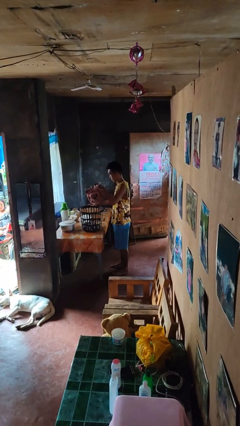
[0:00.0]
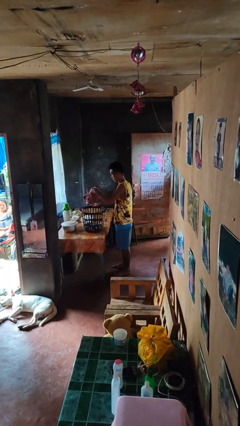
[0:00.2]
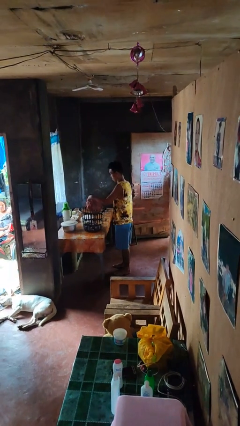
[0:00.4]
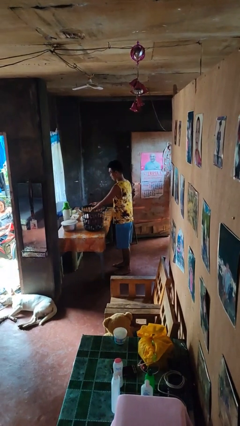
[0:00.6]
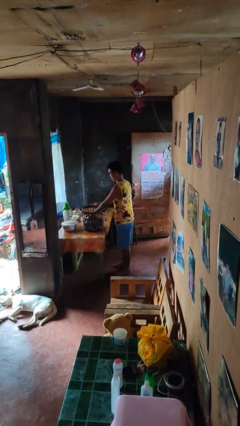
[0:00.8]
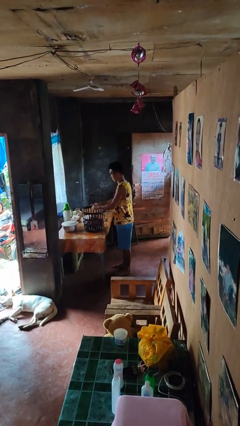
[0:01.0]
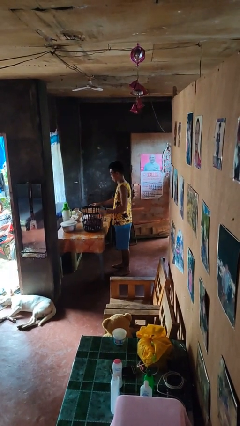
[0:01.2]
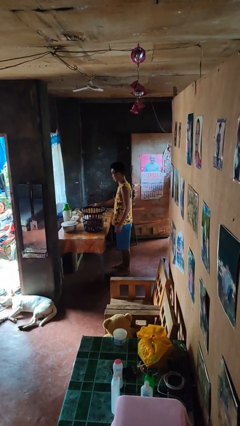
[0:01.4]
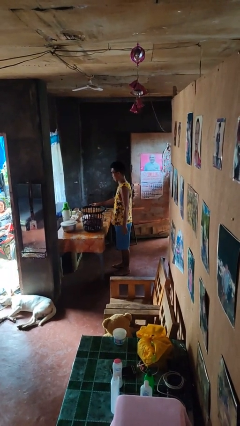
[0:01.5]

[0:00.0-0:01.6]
person puts object into basket

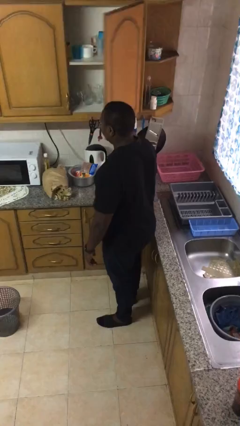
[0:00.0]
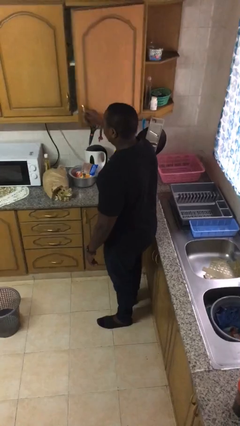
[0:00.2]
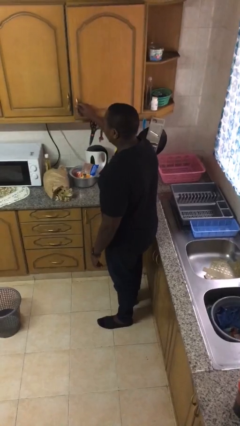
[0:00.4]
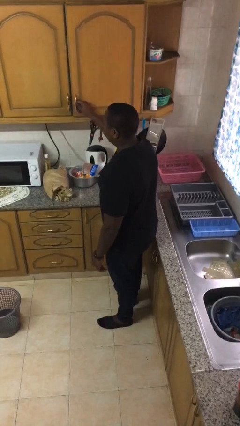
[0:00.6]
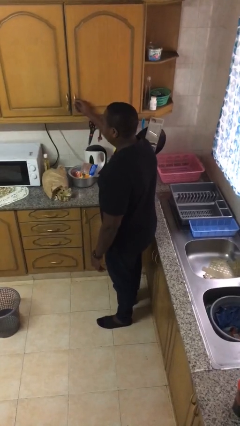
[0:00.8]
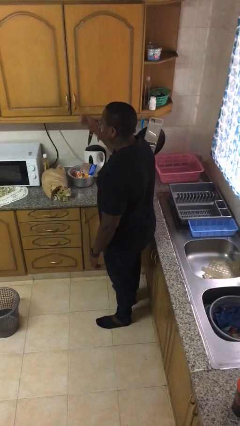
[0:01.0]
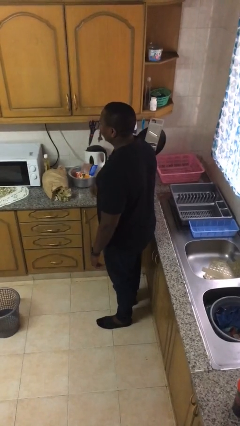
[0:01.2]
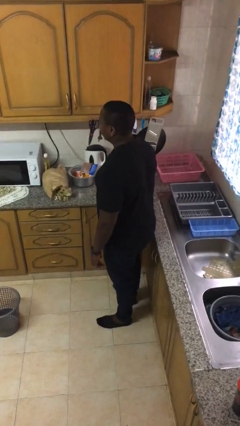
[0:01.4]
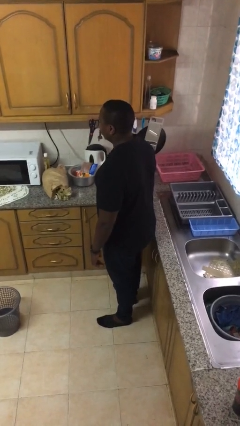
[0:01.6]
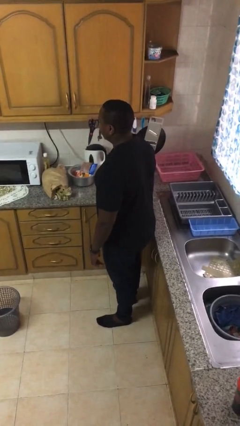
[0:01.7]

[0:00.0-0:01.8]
person closes cabinet

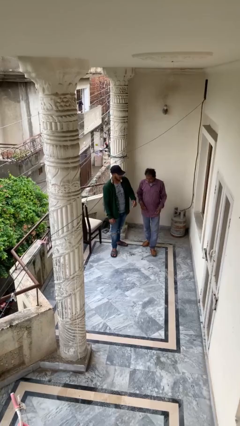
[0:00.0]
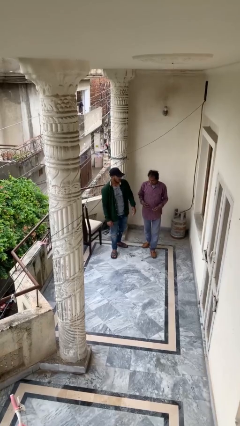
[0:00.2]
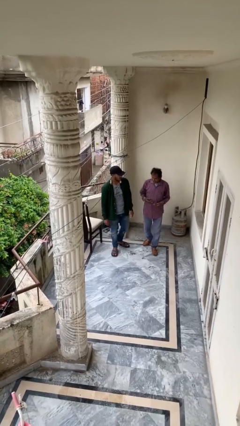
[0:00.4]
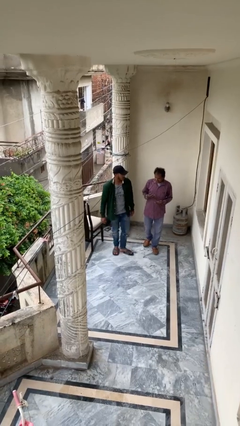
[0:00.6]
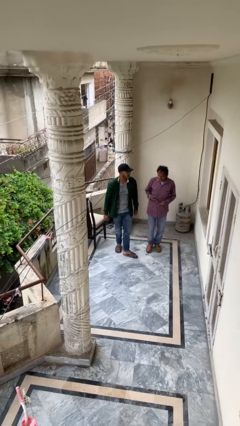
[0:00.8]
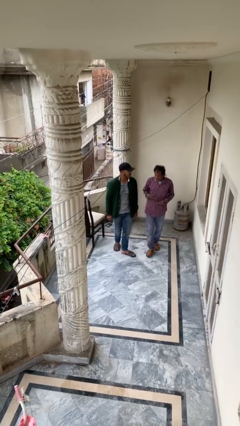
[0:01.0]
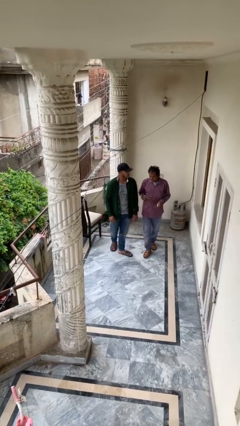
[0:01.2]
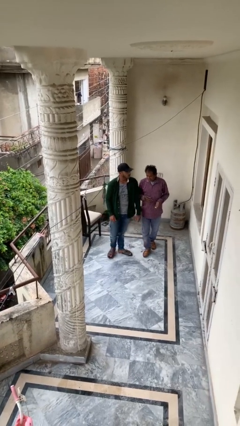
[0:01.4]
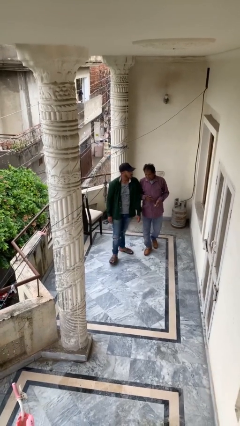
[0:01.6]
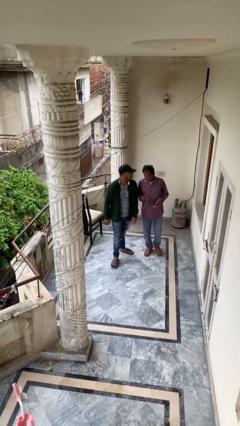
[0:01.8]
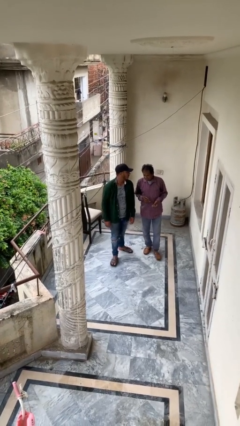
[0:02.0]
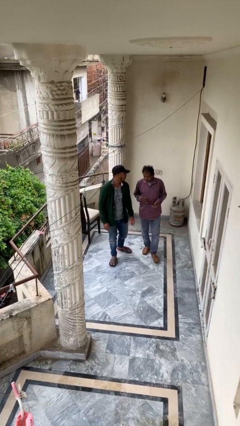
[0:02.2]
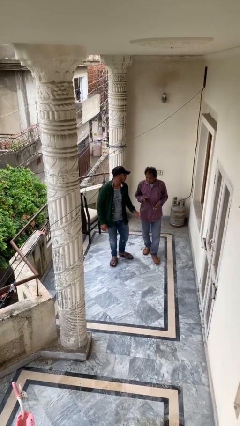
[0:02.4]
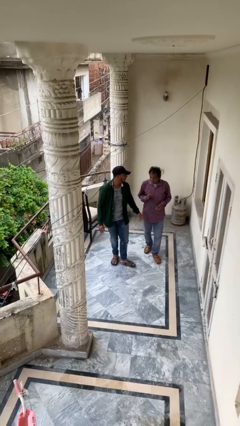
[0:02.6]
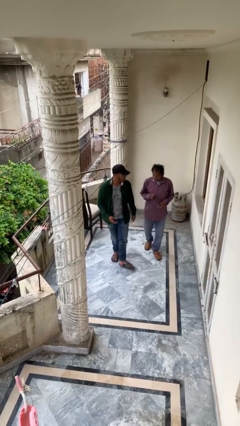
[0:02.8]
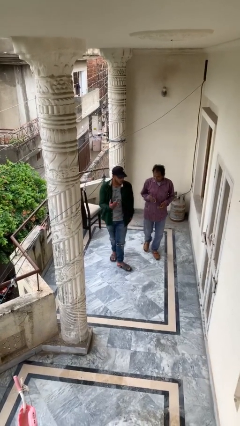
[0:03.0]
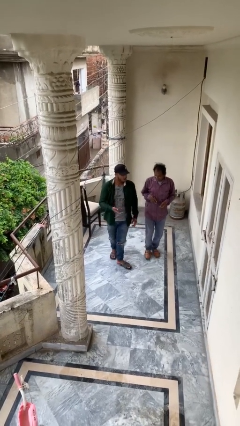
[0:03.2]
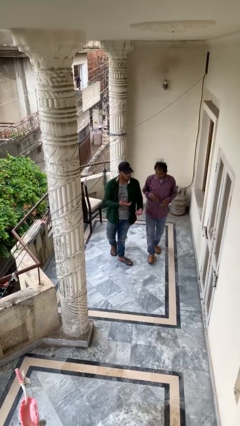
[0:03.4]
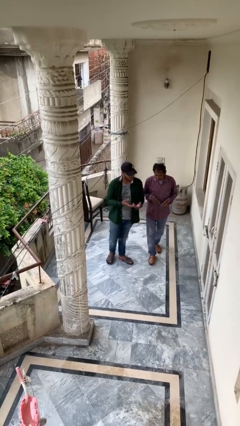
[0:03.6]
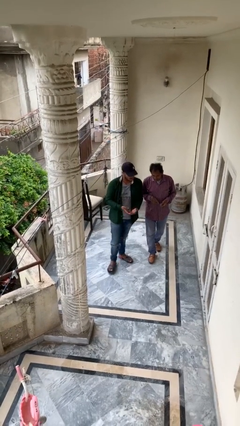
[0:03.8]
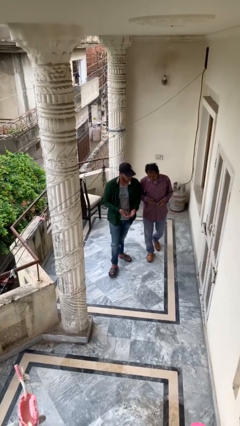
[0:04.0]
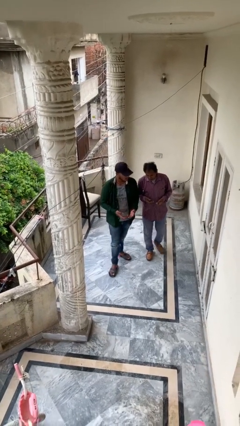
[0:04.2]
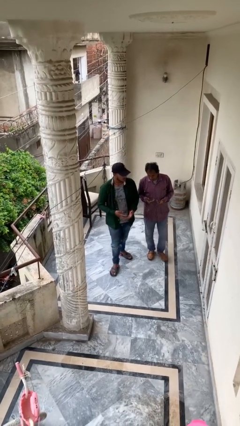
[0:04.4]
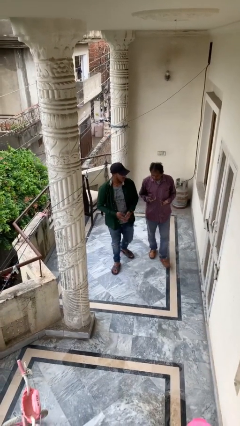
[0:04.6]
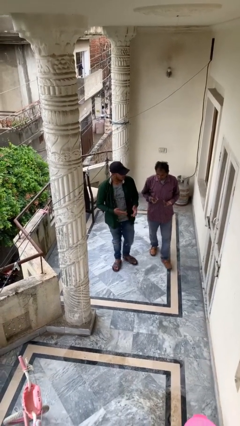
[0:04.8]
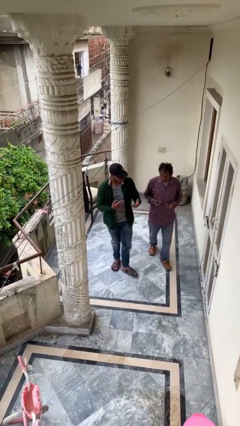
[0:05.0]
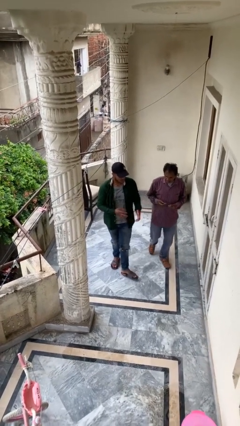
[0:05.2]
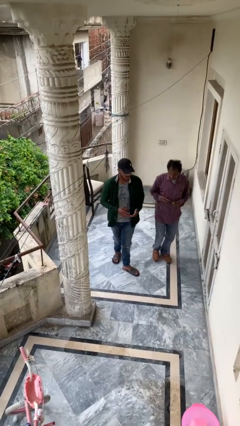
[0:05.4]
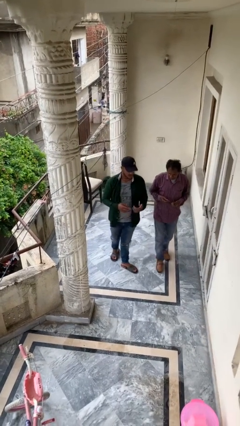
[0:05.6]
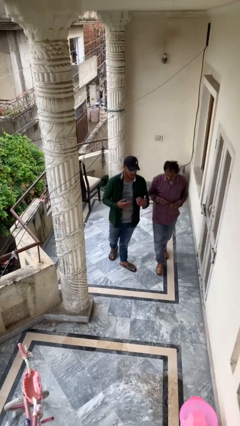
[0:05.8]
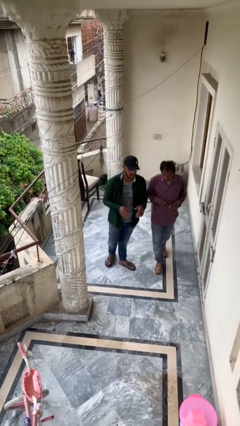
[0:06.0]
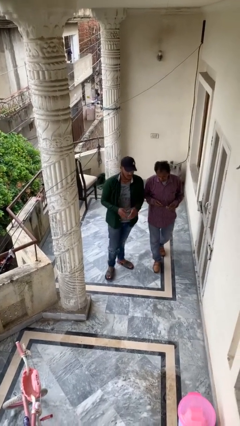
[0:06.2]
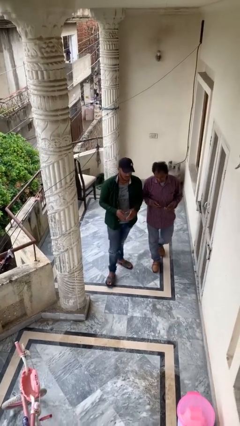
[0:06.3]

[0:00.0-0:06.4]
person talks to person

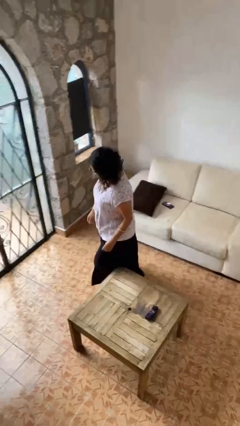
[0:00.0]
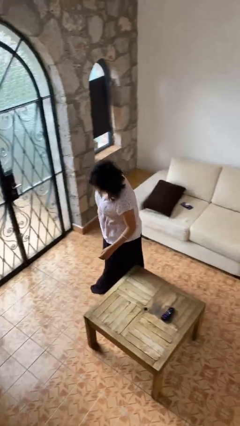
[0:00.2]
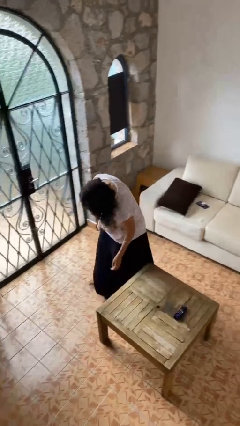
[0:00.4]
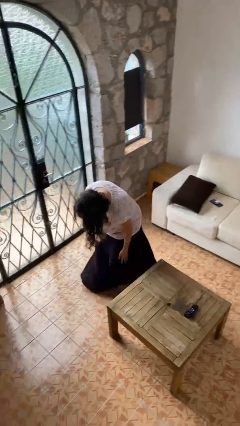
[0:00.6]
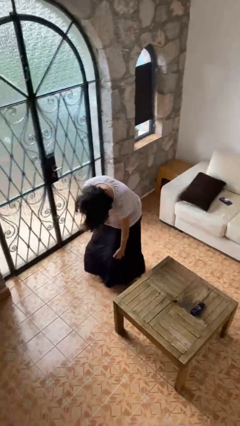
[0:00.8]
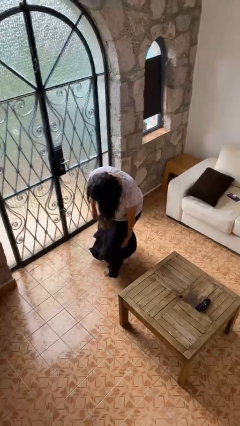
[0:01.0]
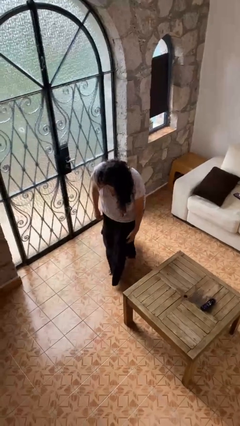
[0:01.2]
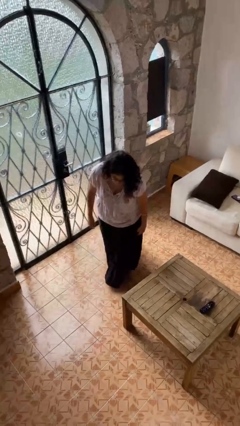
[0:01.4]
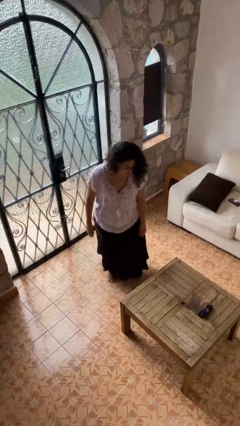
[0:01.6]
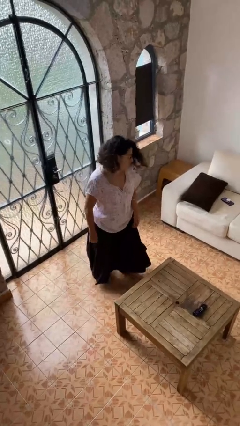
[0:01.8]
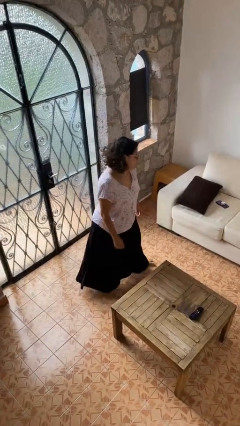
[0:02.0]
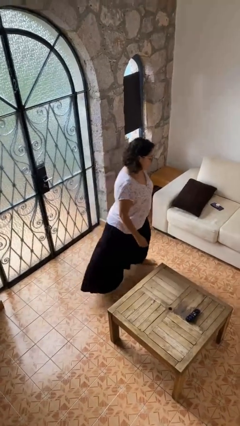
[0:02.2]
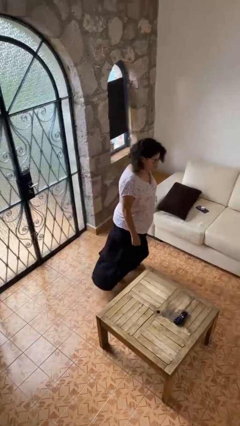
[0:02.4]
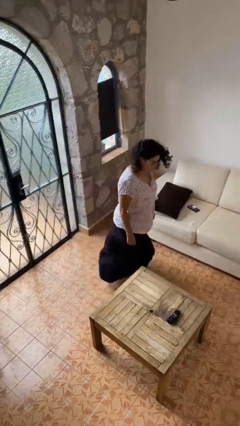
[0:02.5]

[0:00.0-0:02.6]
person bumps into table

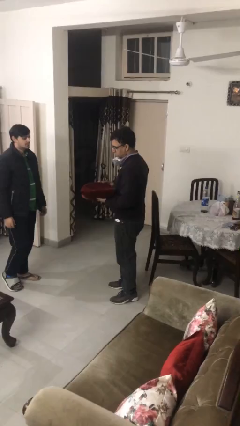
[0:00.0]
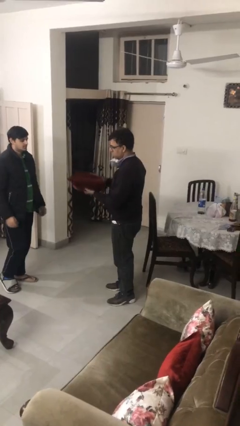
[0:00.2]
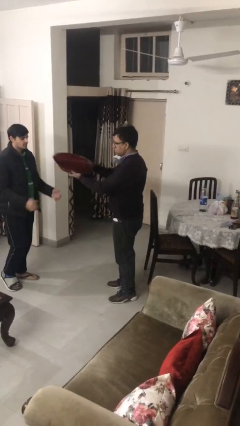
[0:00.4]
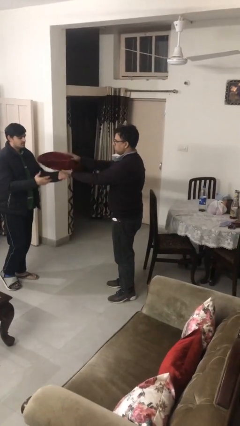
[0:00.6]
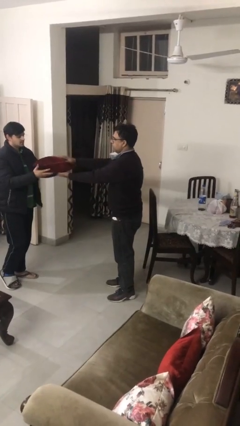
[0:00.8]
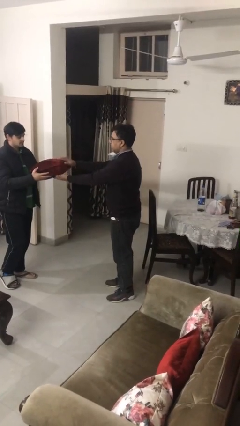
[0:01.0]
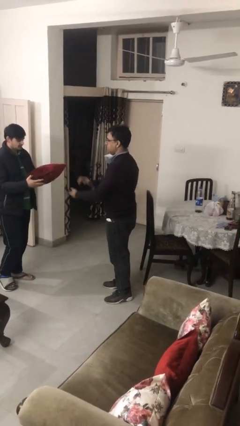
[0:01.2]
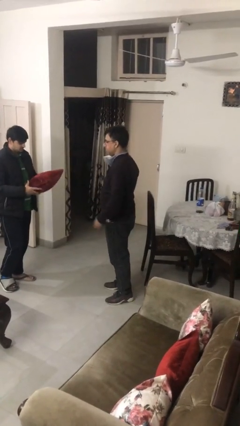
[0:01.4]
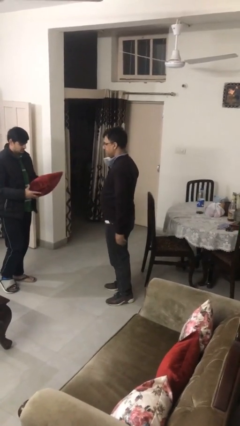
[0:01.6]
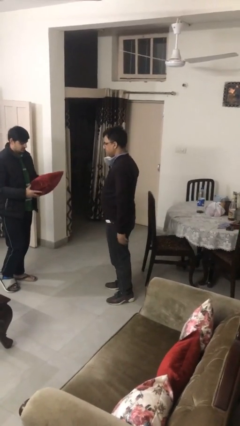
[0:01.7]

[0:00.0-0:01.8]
person transfers object to person

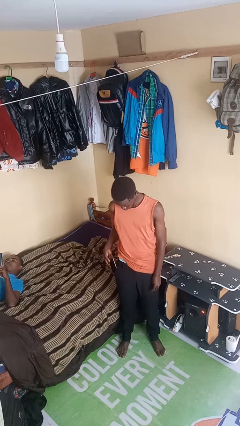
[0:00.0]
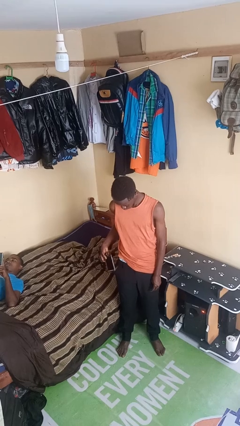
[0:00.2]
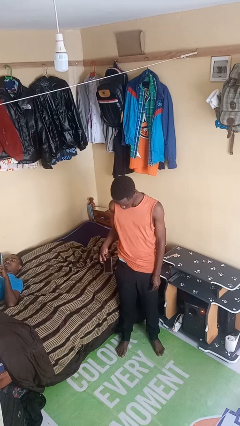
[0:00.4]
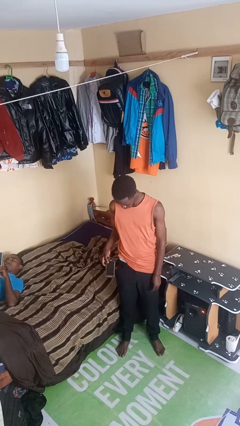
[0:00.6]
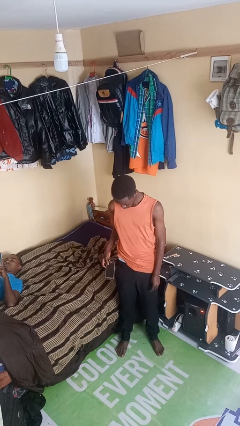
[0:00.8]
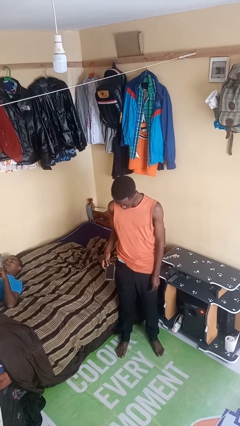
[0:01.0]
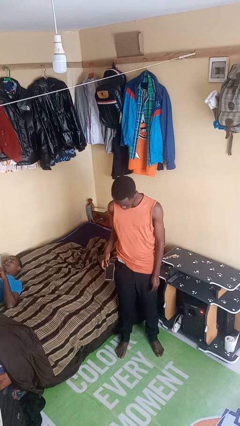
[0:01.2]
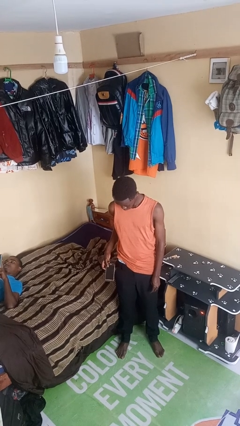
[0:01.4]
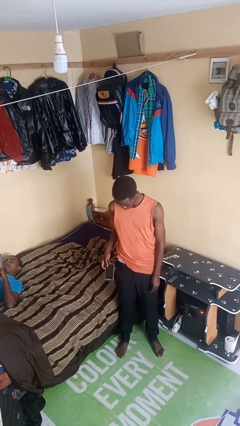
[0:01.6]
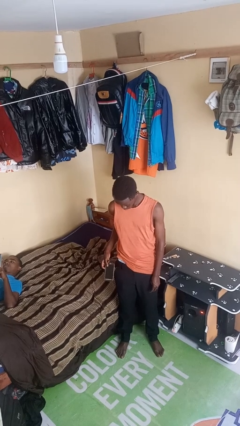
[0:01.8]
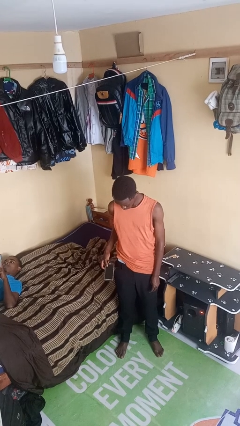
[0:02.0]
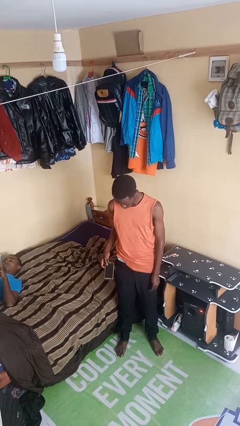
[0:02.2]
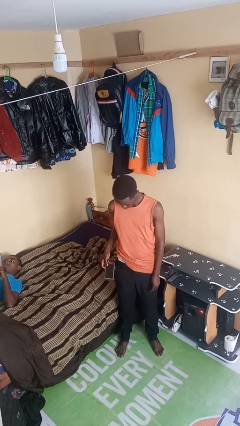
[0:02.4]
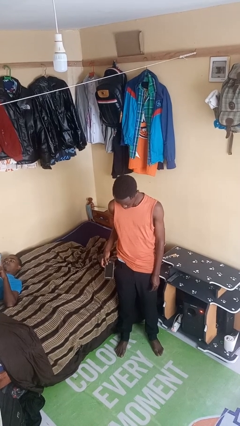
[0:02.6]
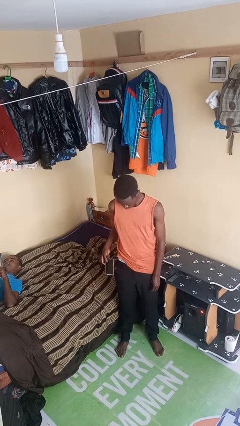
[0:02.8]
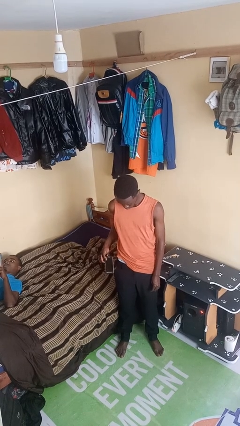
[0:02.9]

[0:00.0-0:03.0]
person takes phone from pocket
